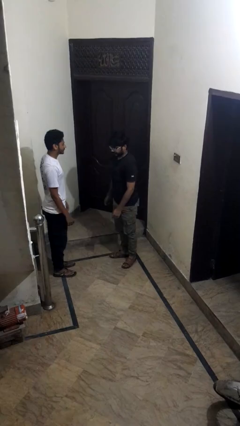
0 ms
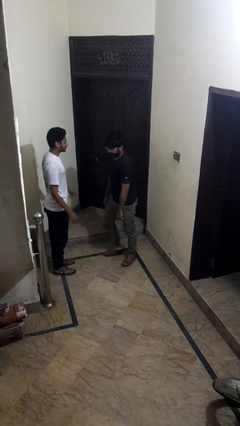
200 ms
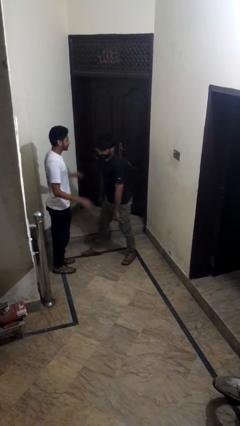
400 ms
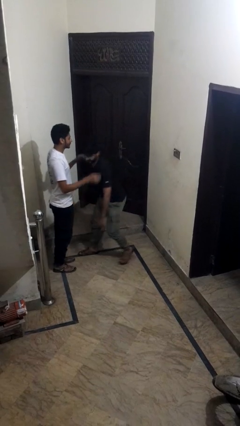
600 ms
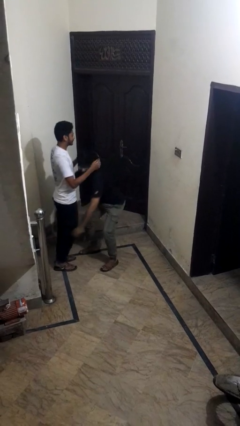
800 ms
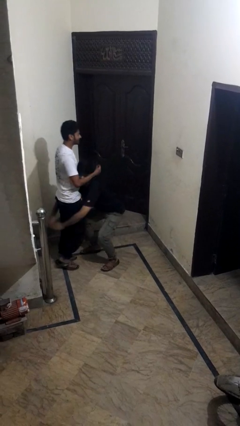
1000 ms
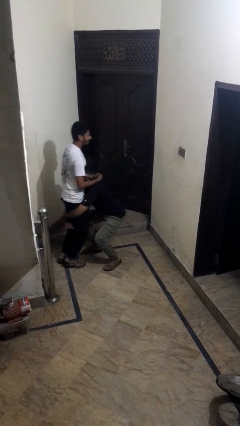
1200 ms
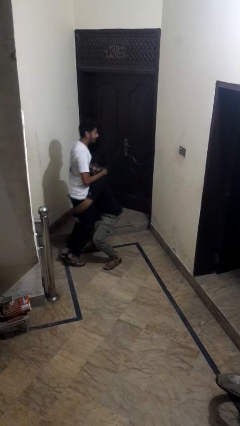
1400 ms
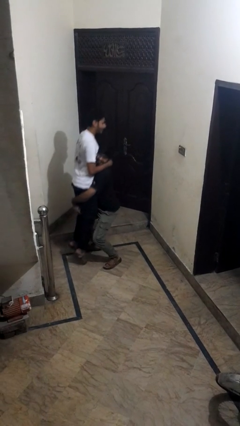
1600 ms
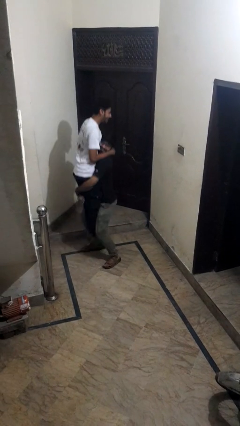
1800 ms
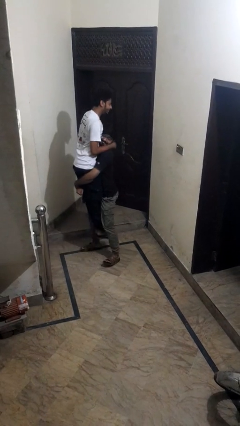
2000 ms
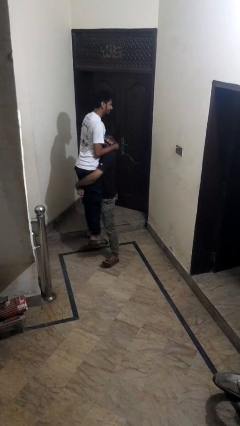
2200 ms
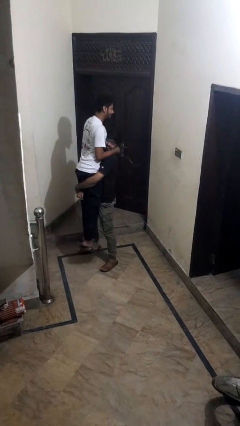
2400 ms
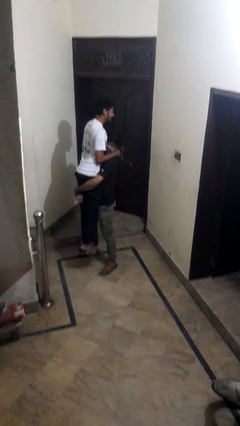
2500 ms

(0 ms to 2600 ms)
person puts on hat

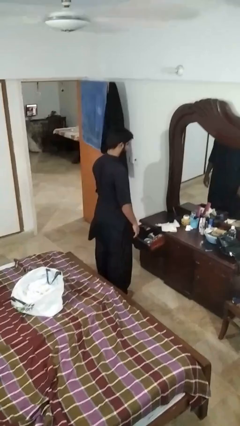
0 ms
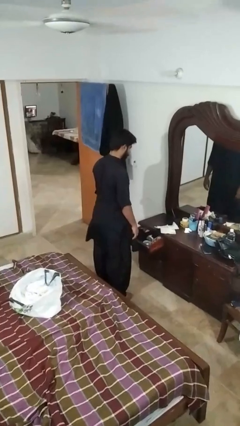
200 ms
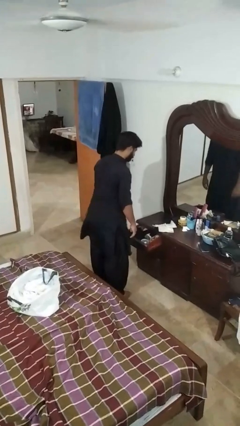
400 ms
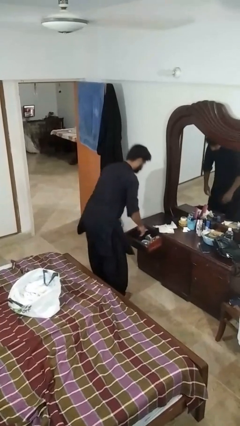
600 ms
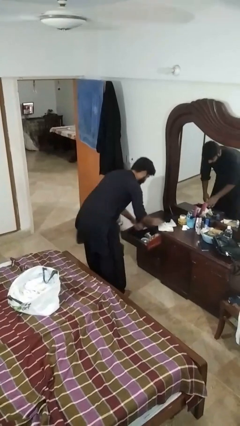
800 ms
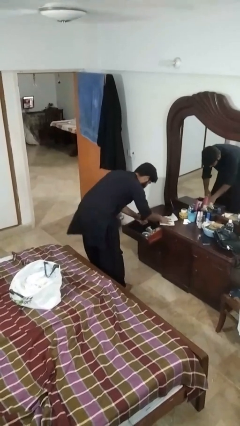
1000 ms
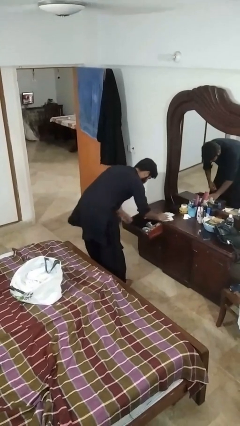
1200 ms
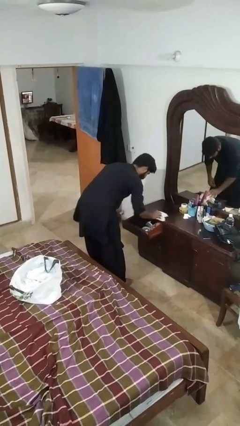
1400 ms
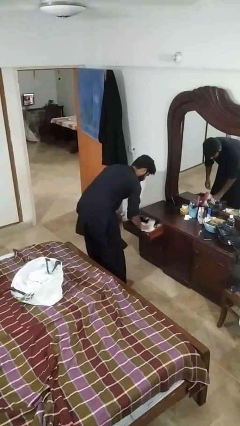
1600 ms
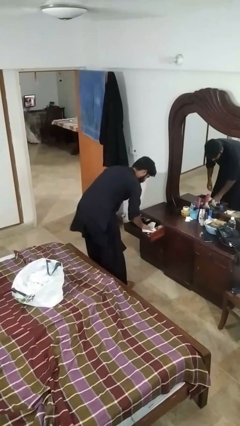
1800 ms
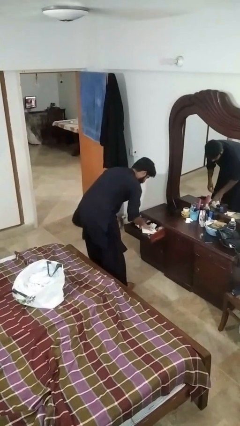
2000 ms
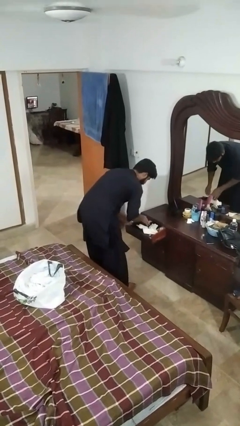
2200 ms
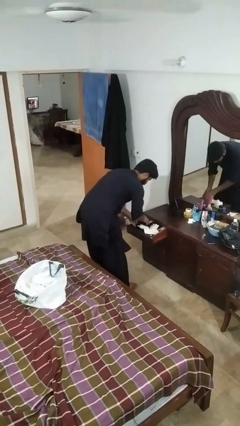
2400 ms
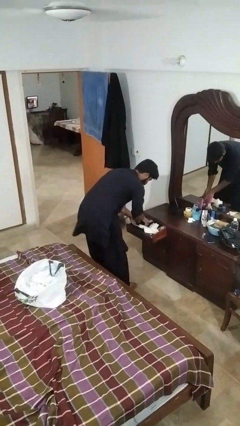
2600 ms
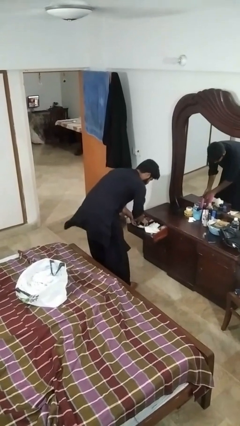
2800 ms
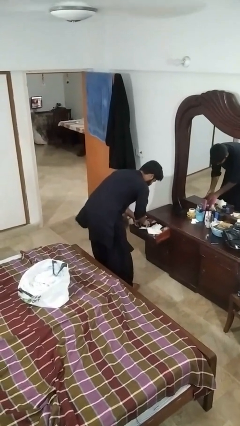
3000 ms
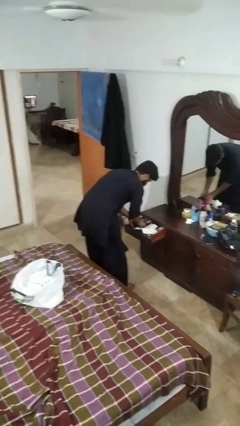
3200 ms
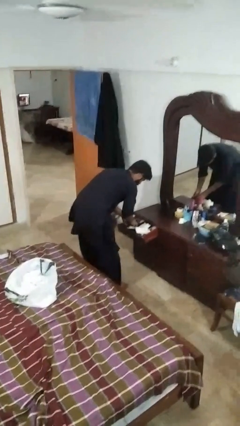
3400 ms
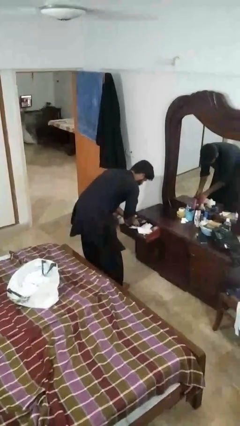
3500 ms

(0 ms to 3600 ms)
person puts clothes into dresser

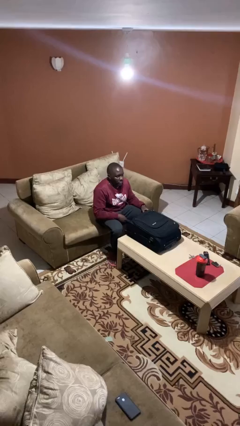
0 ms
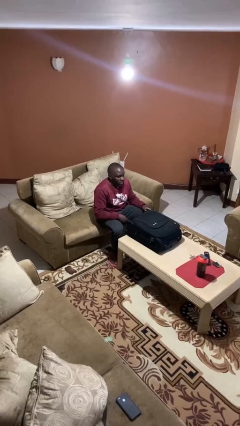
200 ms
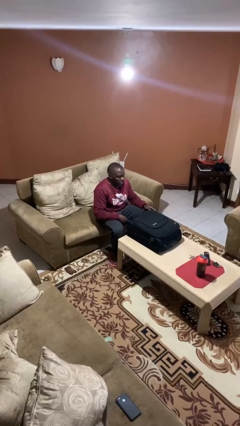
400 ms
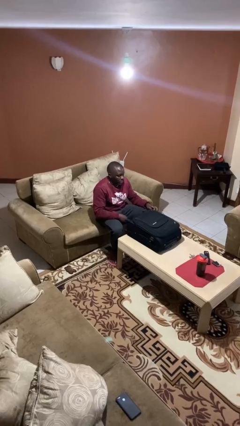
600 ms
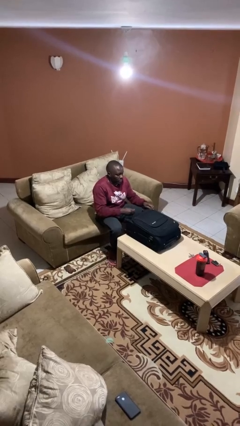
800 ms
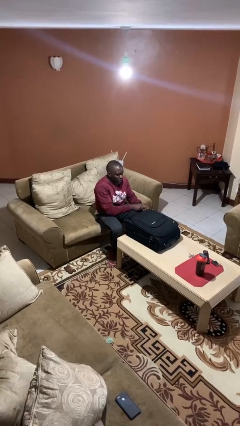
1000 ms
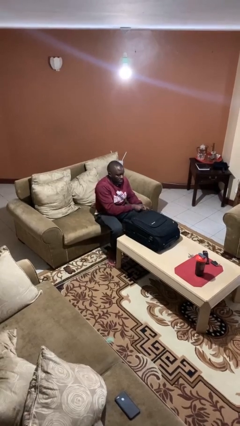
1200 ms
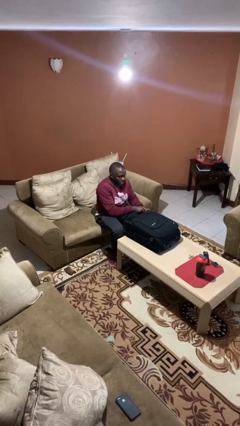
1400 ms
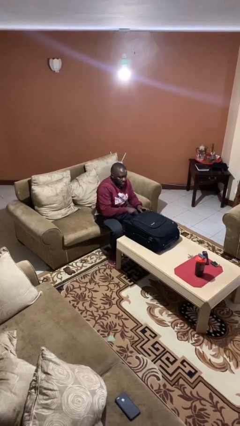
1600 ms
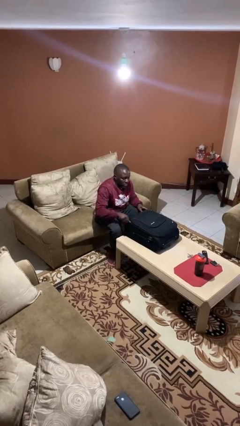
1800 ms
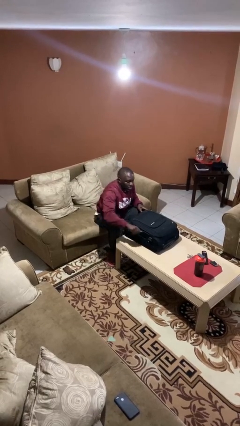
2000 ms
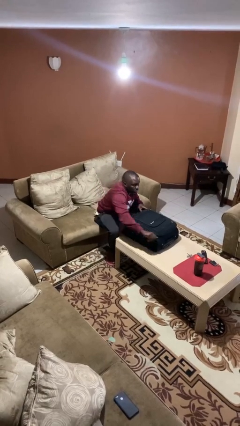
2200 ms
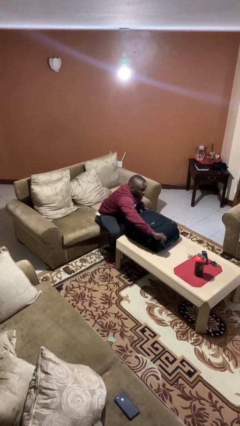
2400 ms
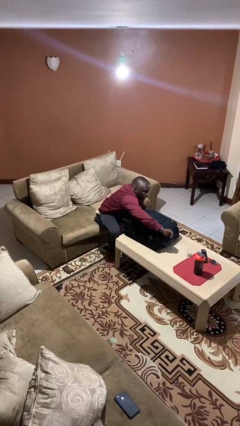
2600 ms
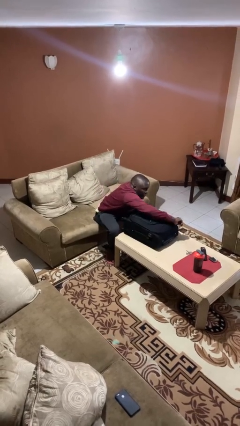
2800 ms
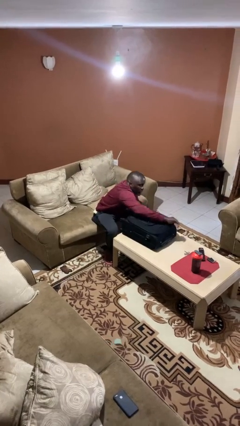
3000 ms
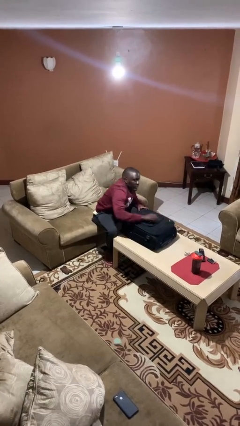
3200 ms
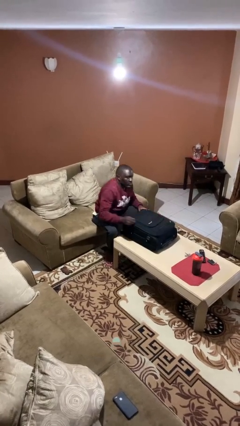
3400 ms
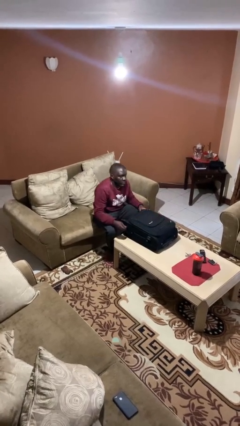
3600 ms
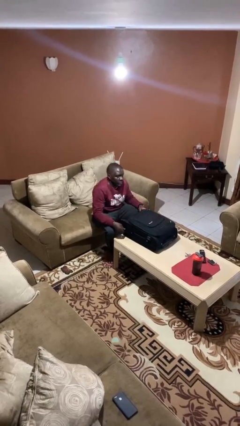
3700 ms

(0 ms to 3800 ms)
person closes suitcase

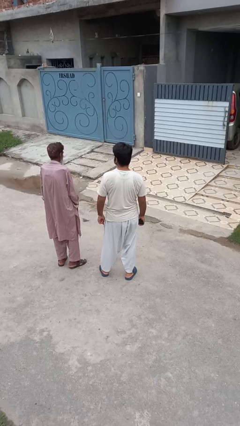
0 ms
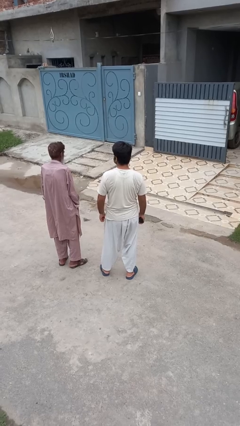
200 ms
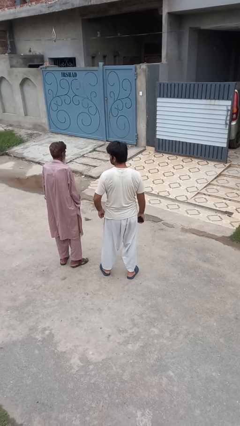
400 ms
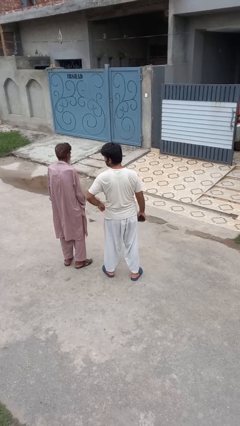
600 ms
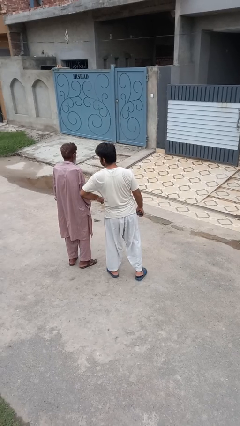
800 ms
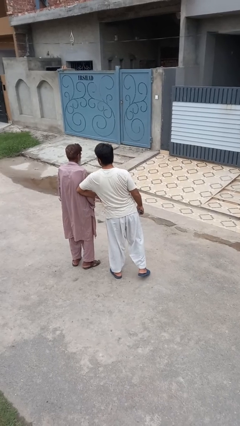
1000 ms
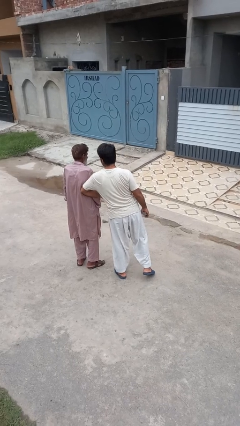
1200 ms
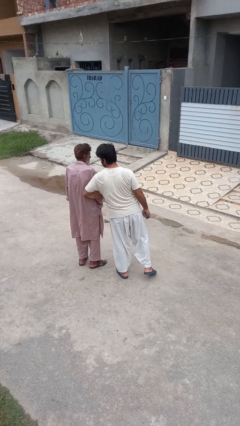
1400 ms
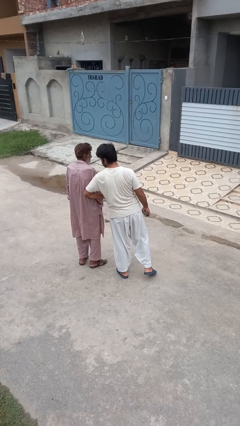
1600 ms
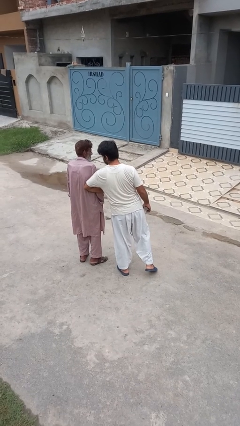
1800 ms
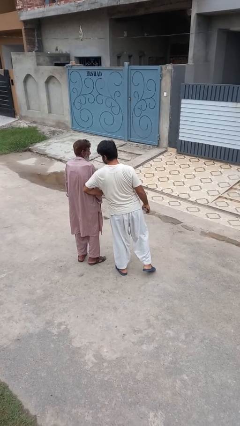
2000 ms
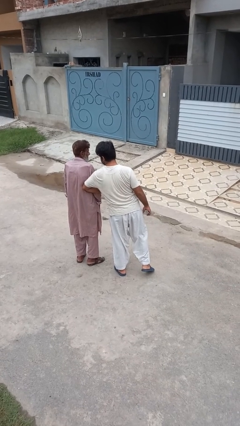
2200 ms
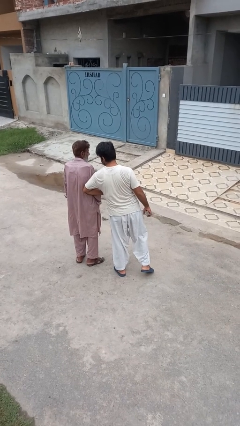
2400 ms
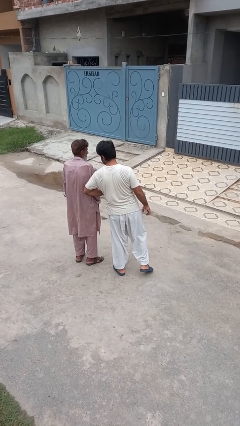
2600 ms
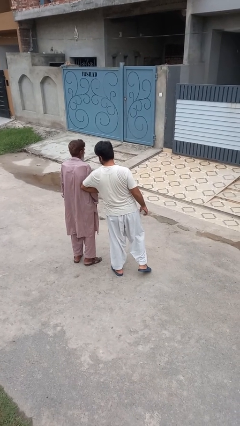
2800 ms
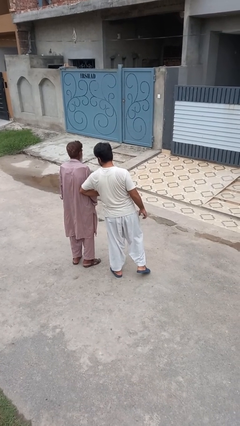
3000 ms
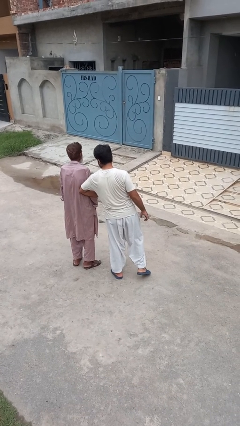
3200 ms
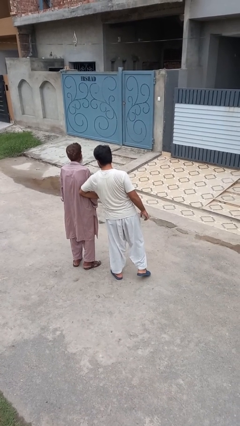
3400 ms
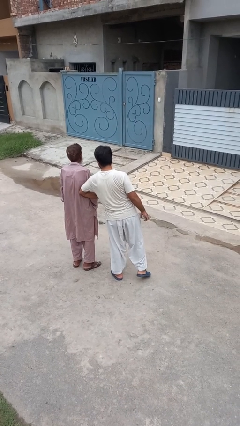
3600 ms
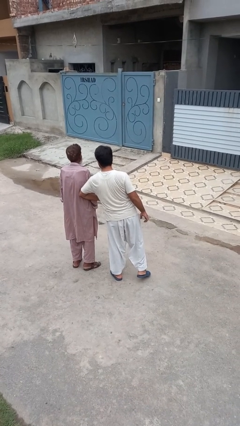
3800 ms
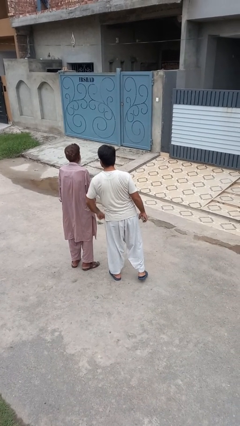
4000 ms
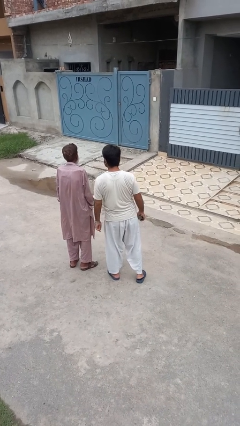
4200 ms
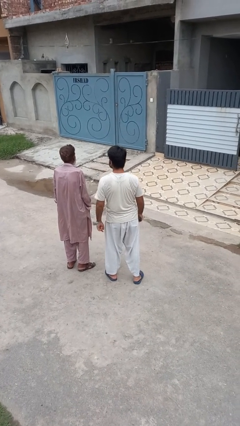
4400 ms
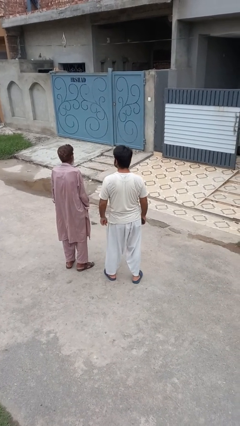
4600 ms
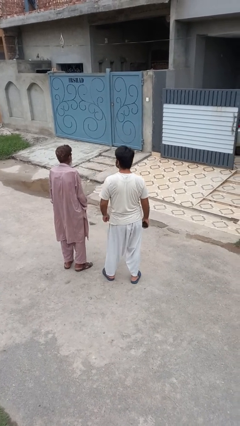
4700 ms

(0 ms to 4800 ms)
person nudges person with elbow

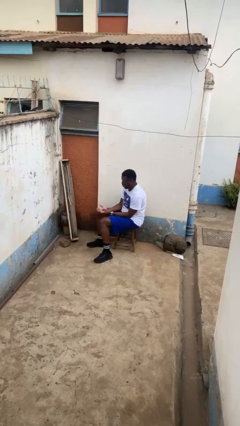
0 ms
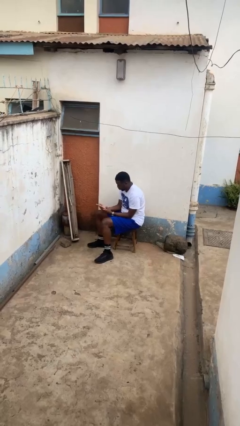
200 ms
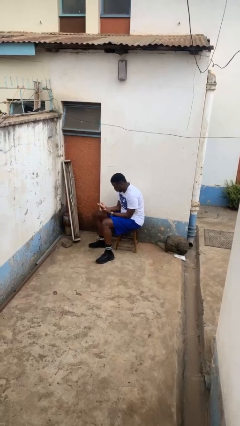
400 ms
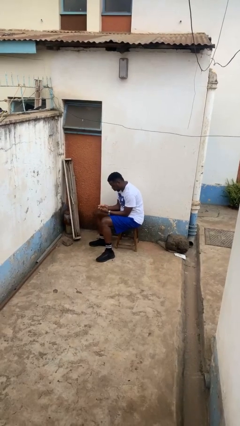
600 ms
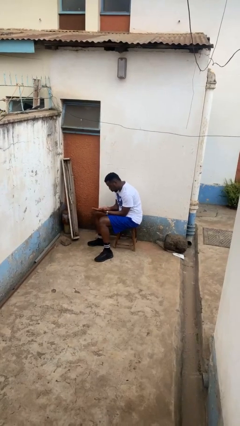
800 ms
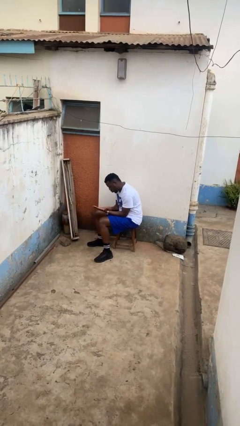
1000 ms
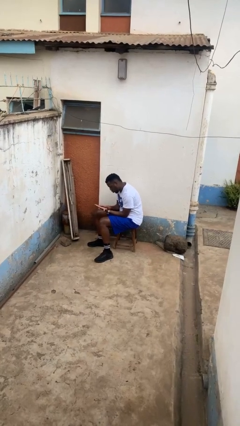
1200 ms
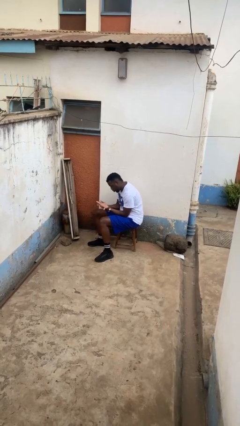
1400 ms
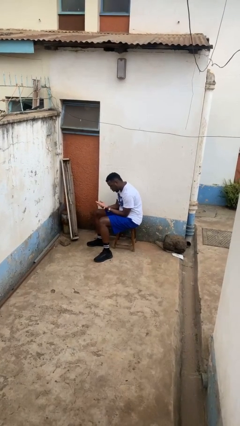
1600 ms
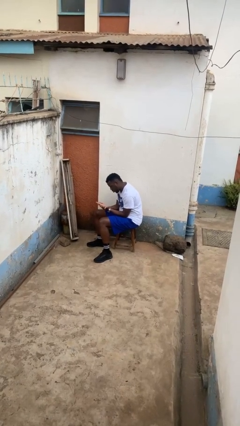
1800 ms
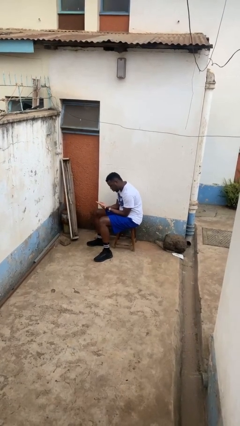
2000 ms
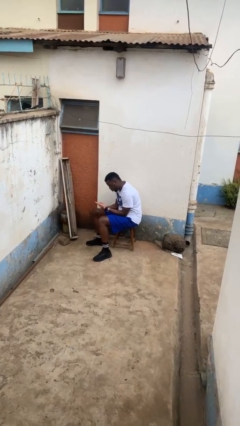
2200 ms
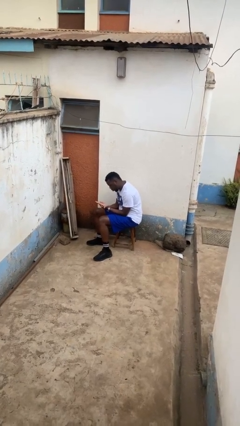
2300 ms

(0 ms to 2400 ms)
person looks at hands in lap

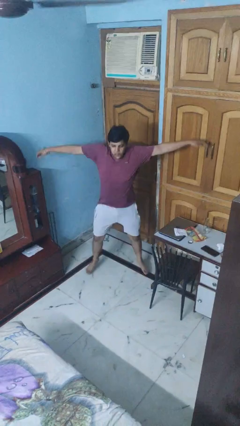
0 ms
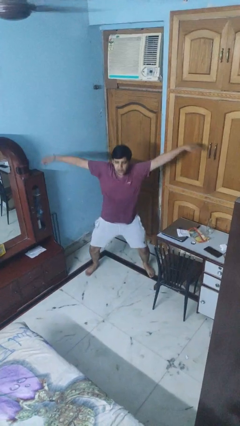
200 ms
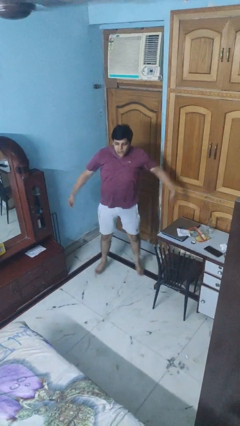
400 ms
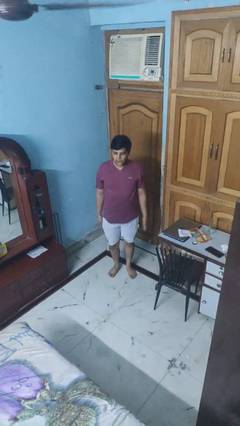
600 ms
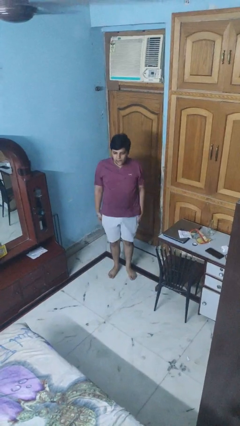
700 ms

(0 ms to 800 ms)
person exercises with jumping jacks
